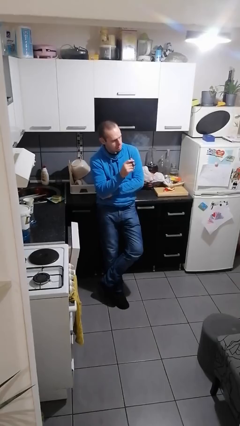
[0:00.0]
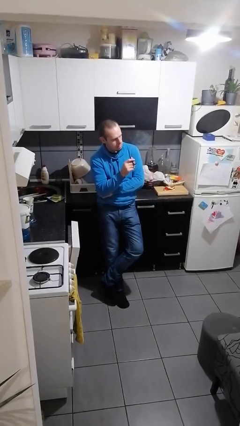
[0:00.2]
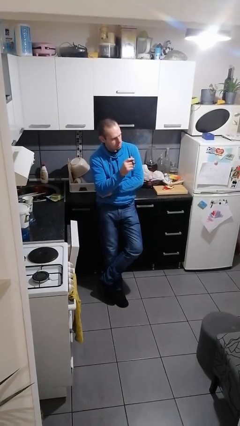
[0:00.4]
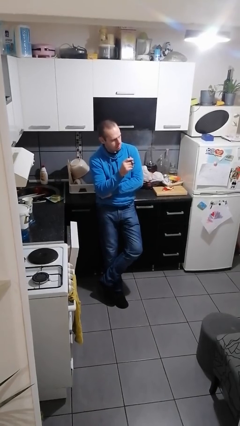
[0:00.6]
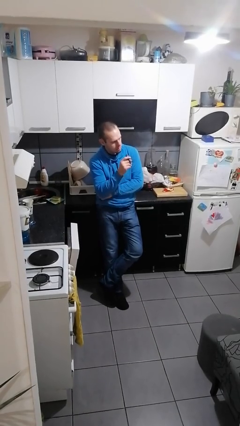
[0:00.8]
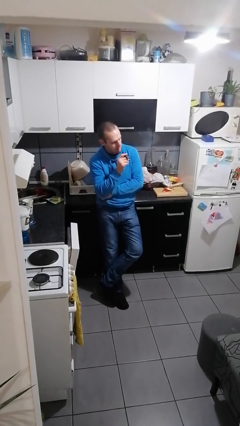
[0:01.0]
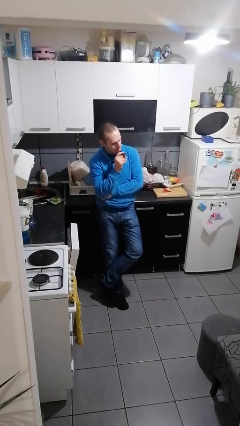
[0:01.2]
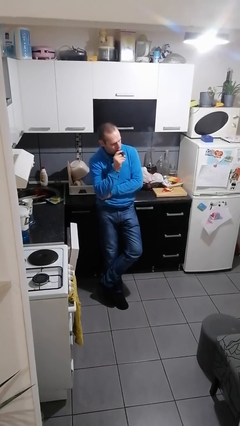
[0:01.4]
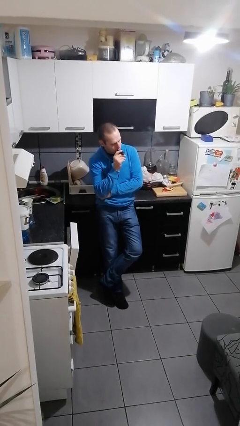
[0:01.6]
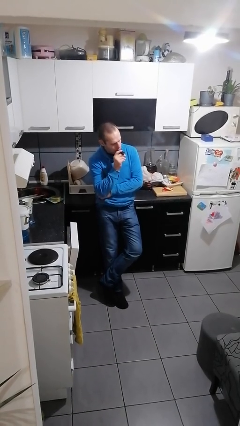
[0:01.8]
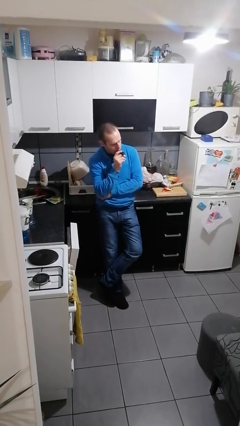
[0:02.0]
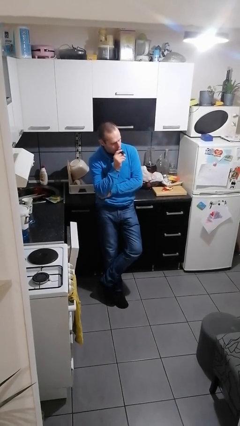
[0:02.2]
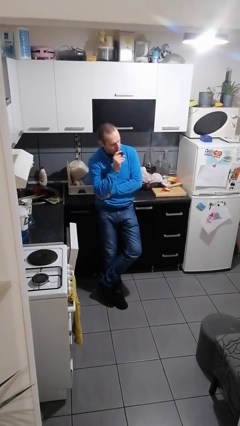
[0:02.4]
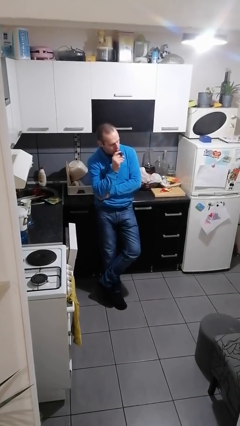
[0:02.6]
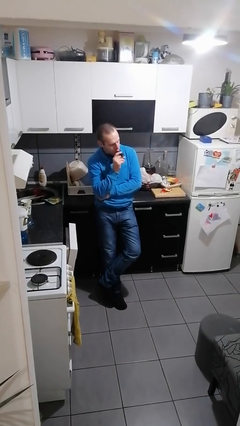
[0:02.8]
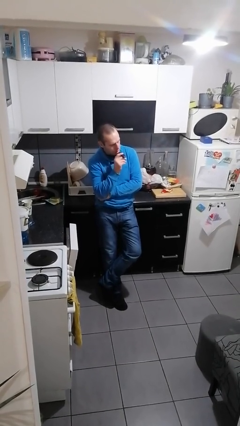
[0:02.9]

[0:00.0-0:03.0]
person vapes

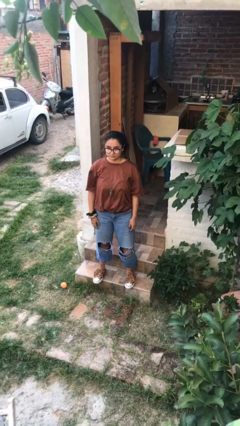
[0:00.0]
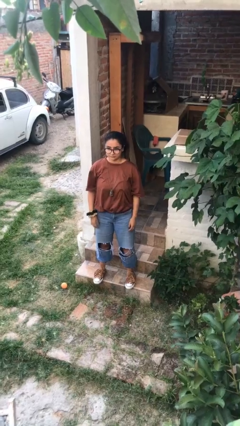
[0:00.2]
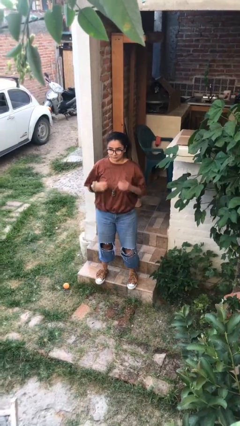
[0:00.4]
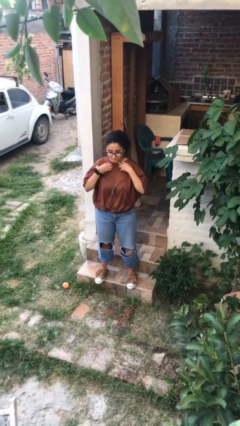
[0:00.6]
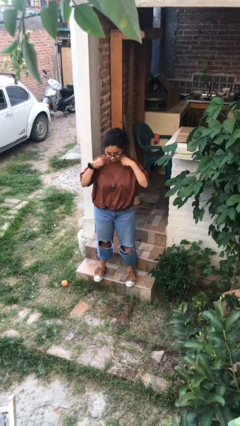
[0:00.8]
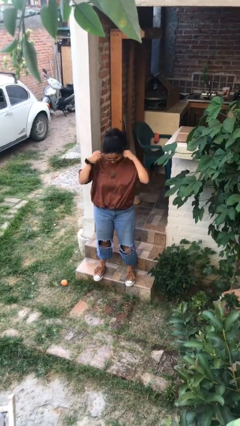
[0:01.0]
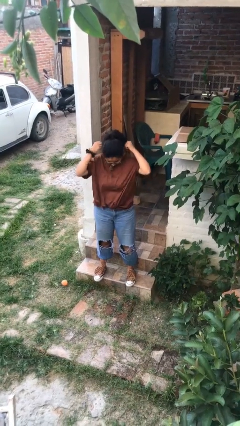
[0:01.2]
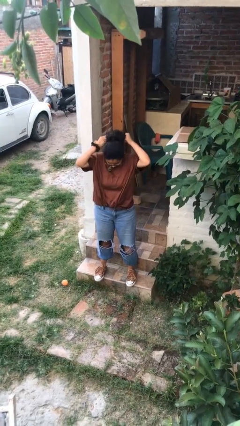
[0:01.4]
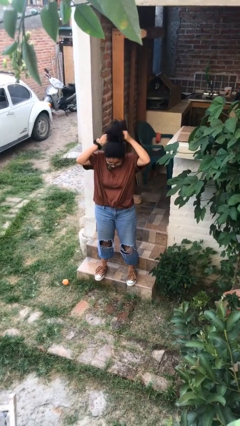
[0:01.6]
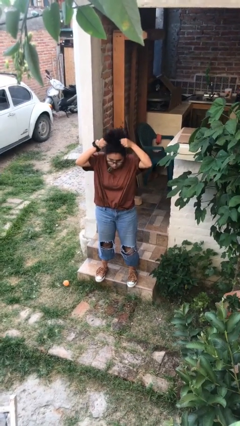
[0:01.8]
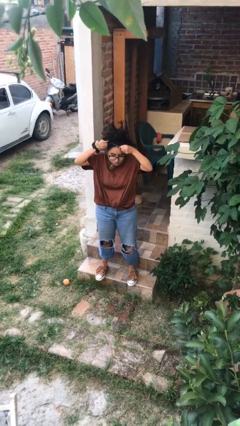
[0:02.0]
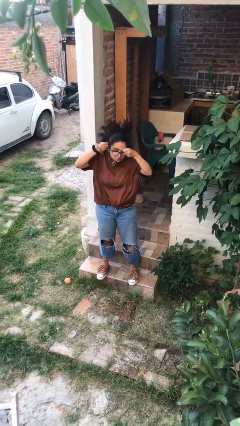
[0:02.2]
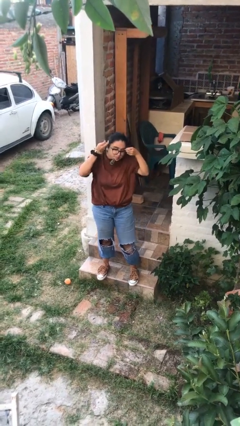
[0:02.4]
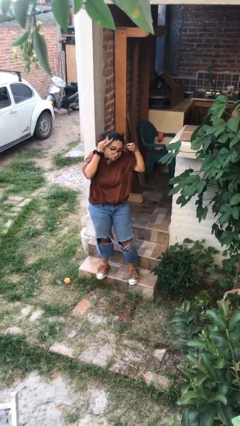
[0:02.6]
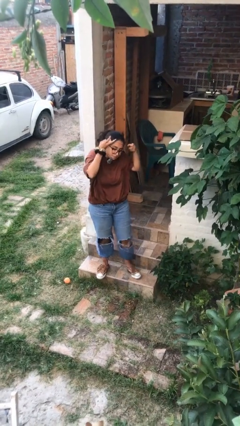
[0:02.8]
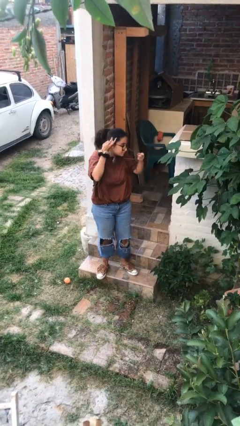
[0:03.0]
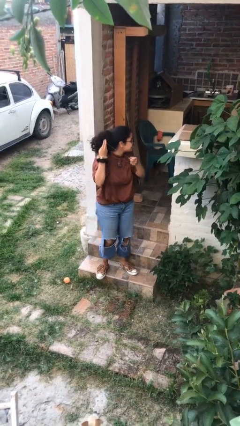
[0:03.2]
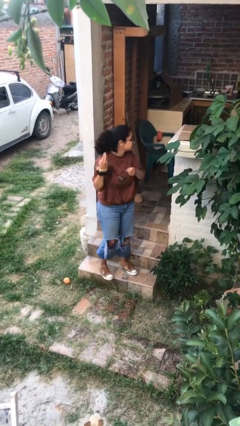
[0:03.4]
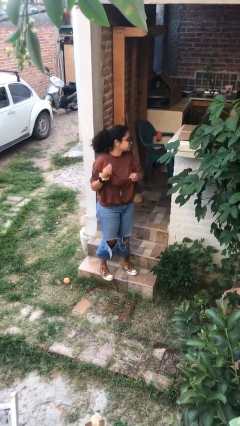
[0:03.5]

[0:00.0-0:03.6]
person takes off necklace

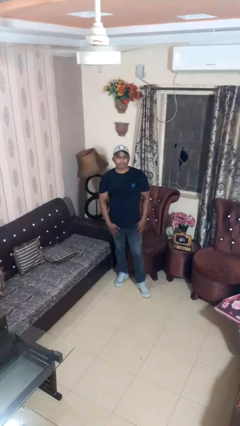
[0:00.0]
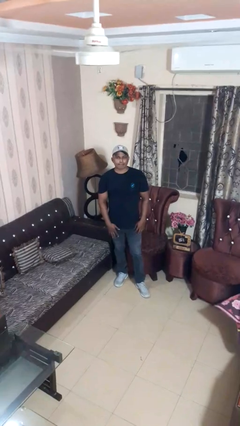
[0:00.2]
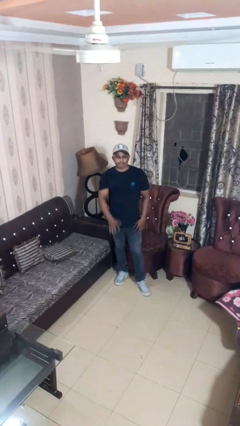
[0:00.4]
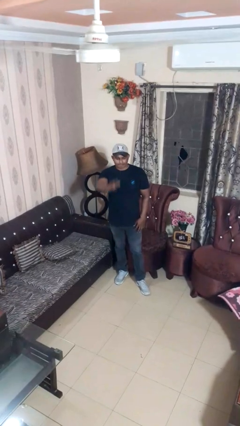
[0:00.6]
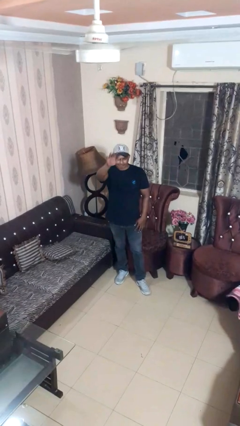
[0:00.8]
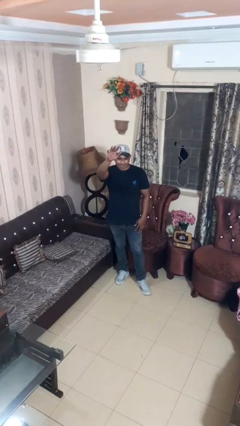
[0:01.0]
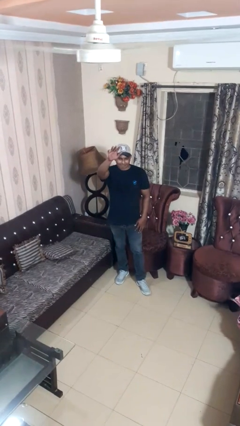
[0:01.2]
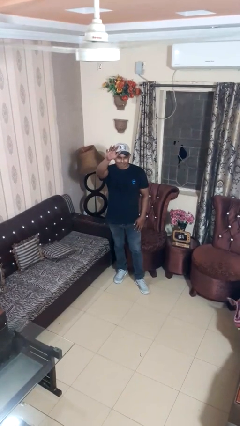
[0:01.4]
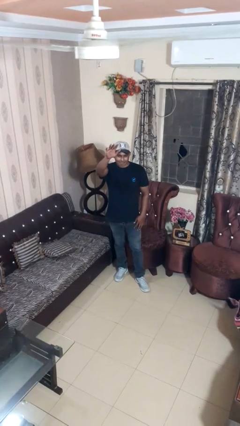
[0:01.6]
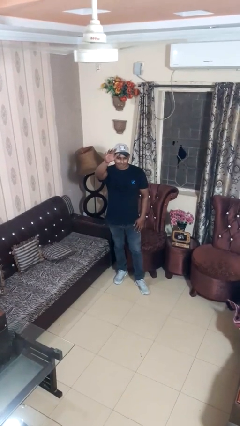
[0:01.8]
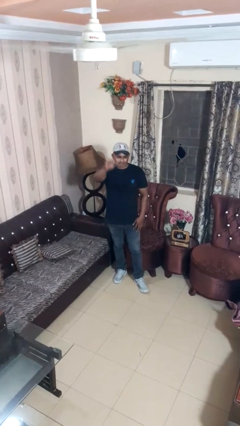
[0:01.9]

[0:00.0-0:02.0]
person gestures swipe up

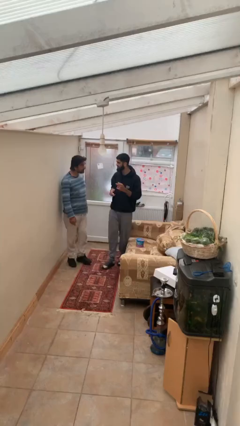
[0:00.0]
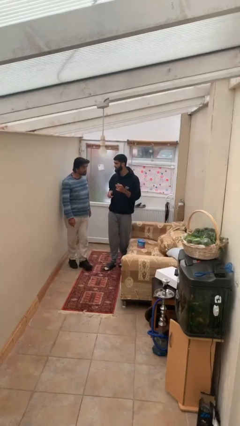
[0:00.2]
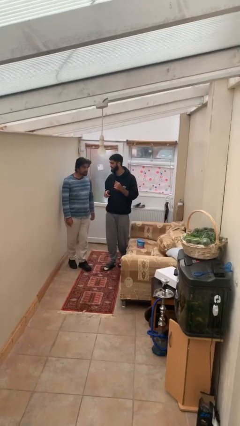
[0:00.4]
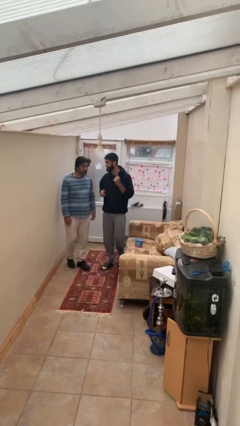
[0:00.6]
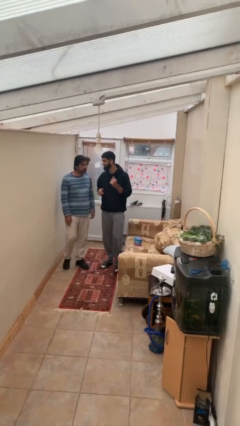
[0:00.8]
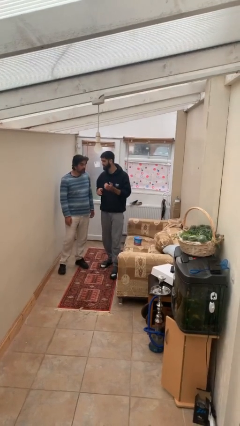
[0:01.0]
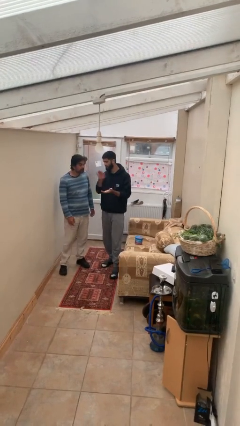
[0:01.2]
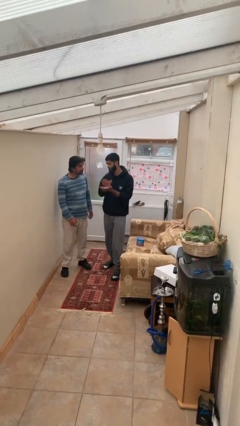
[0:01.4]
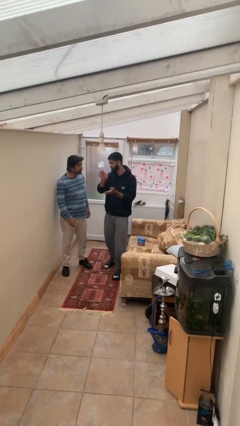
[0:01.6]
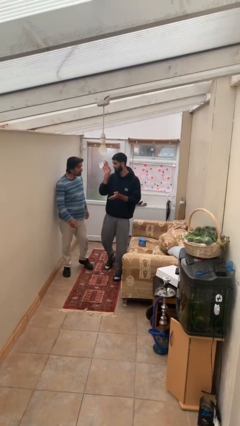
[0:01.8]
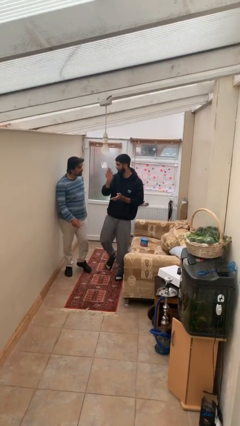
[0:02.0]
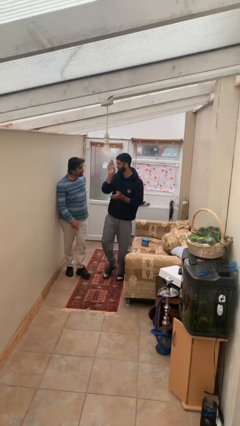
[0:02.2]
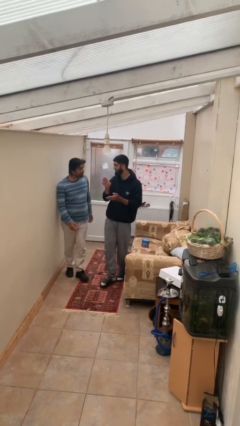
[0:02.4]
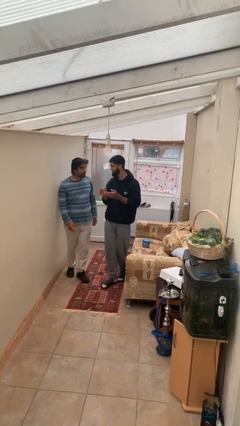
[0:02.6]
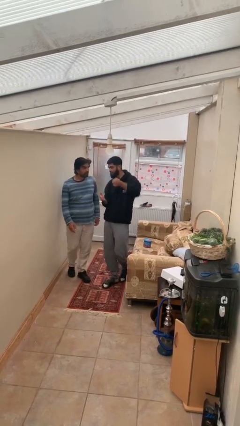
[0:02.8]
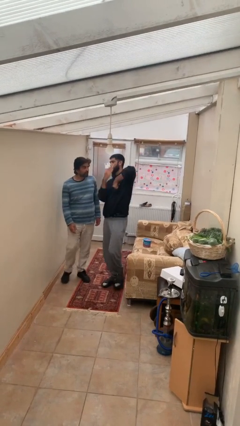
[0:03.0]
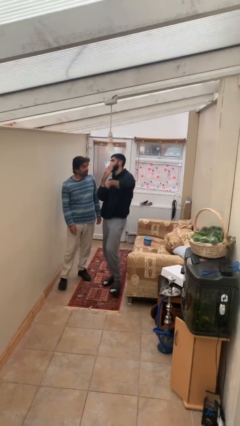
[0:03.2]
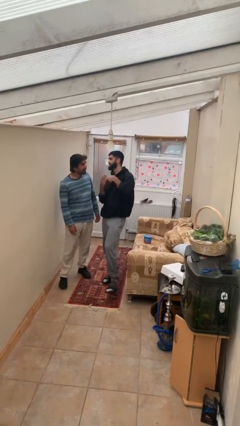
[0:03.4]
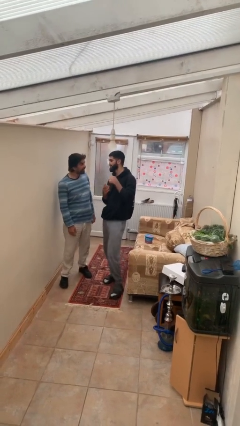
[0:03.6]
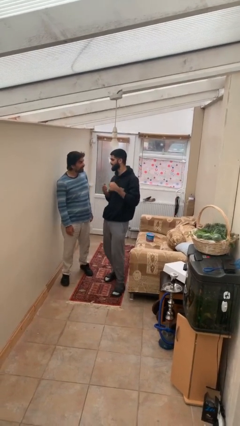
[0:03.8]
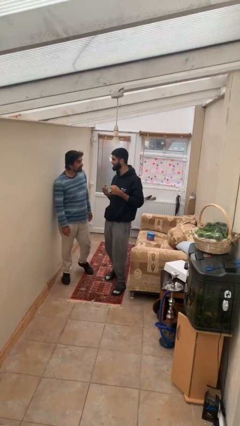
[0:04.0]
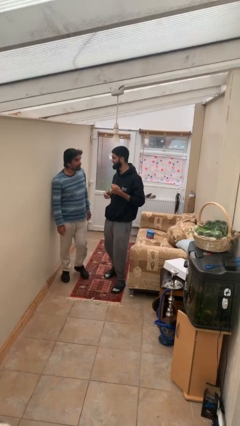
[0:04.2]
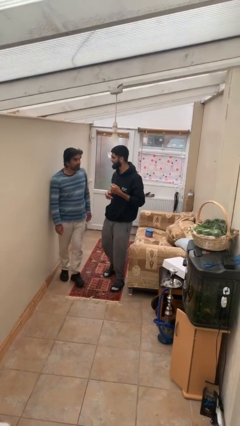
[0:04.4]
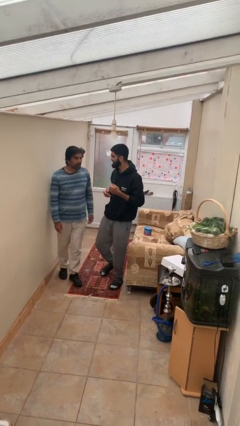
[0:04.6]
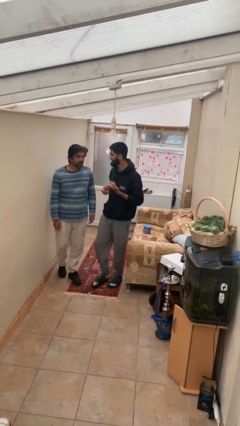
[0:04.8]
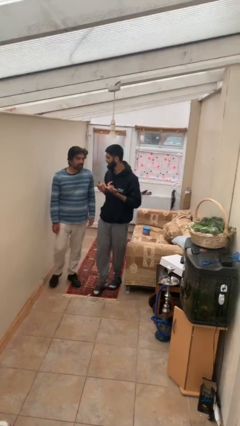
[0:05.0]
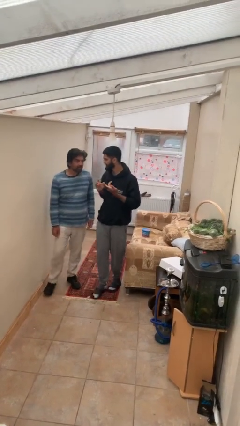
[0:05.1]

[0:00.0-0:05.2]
person talks to person

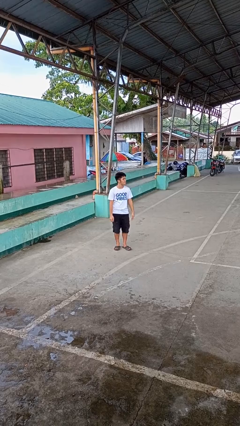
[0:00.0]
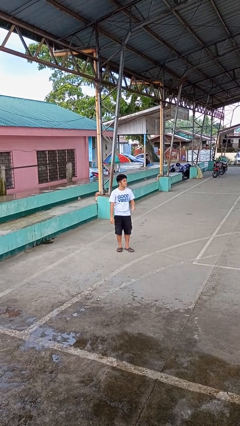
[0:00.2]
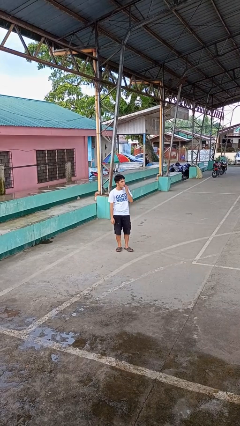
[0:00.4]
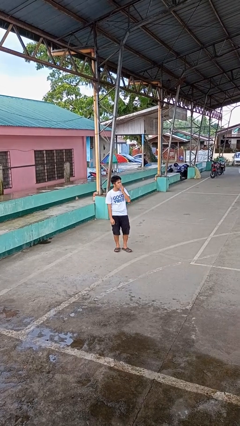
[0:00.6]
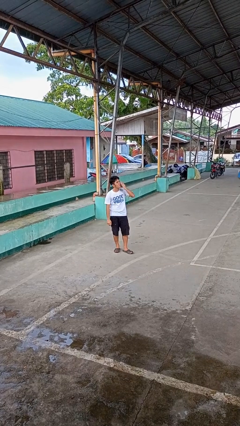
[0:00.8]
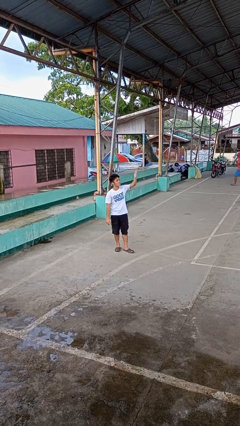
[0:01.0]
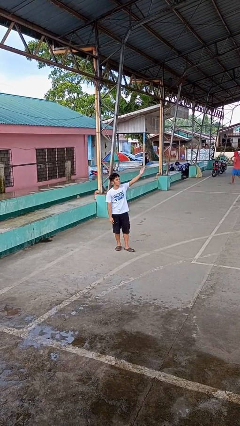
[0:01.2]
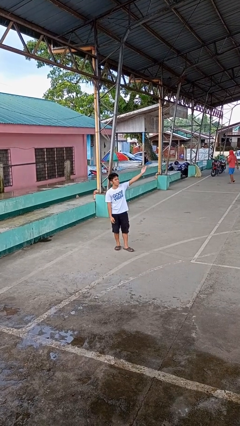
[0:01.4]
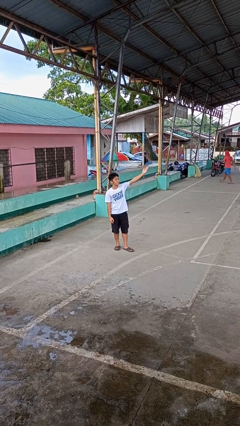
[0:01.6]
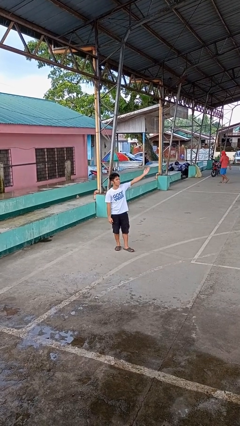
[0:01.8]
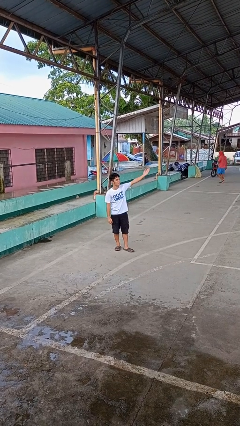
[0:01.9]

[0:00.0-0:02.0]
person gestures blow kiss

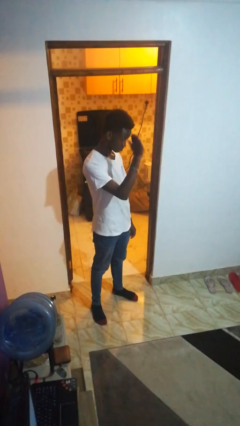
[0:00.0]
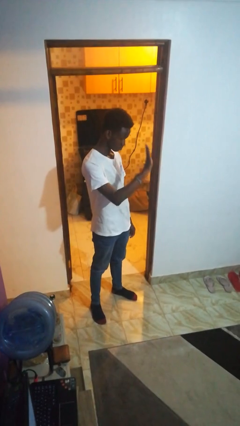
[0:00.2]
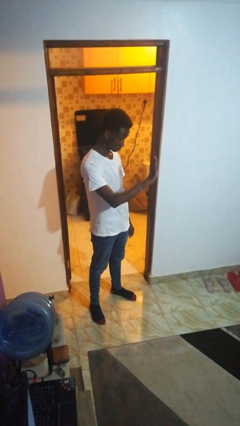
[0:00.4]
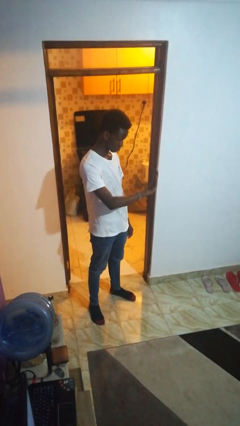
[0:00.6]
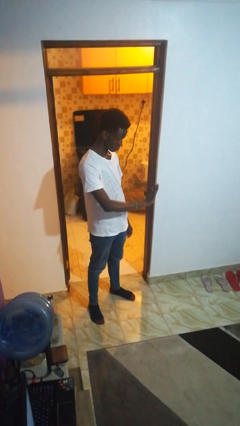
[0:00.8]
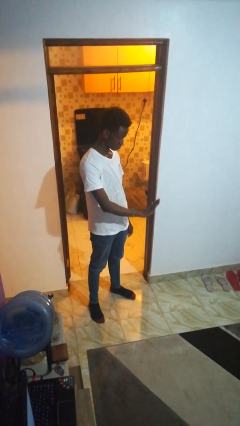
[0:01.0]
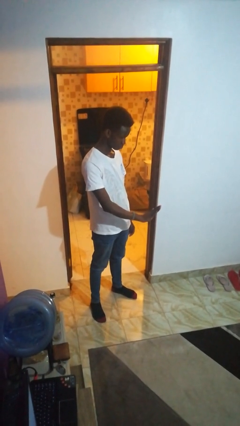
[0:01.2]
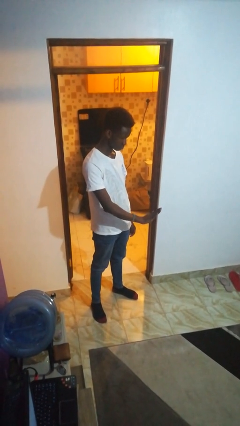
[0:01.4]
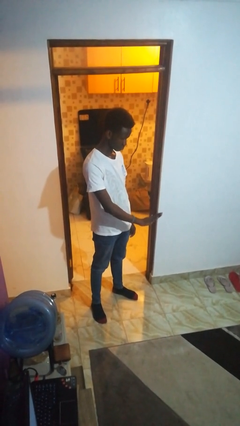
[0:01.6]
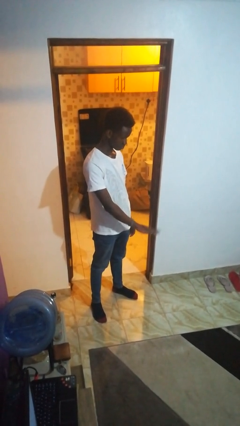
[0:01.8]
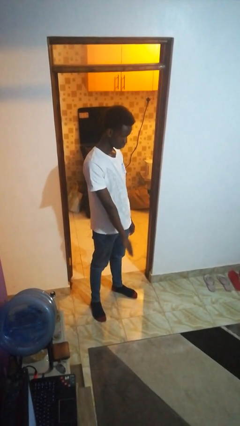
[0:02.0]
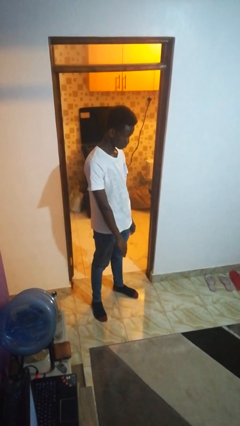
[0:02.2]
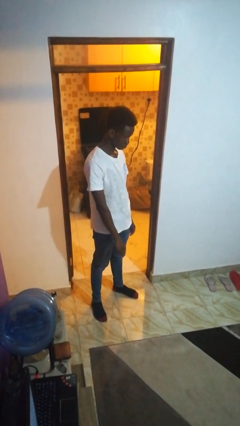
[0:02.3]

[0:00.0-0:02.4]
person gestures swipe down
